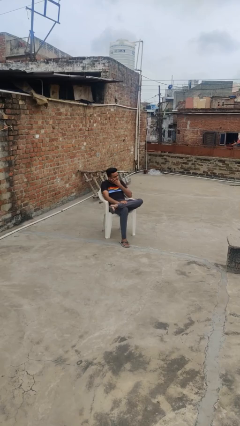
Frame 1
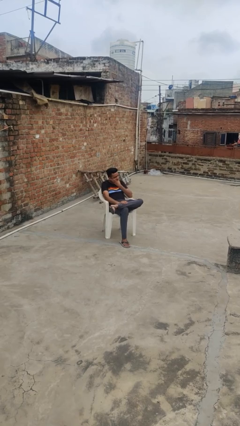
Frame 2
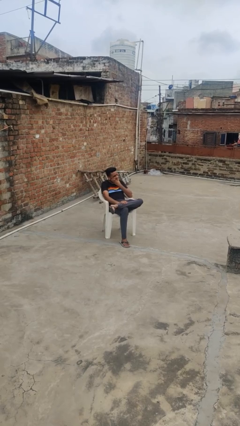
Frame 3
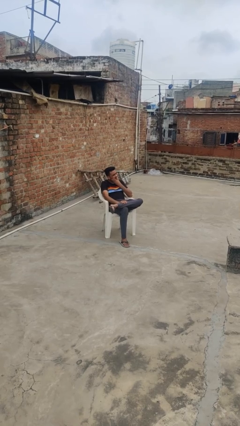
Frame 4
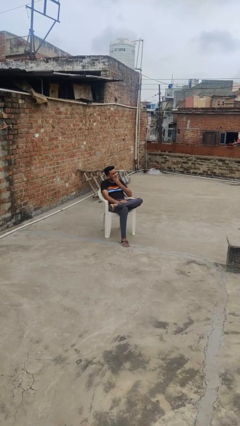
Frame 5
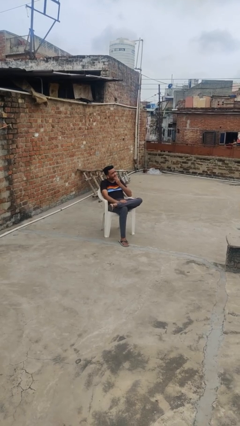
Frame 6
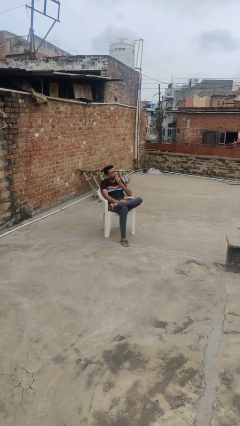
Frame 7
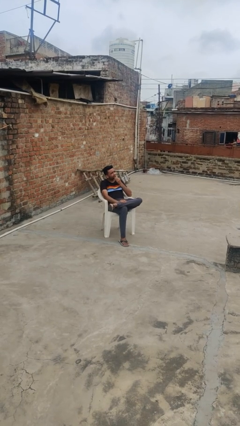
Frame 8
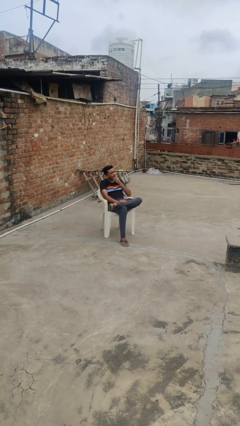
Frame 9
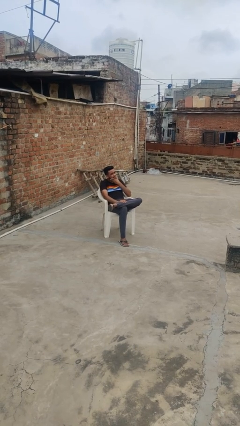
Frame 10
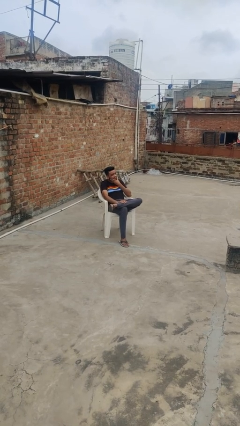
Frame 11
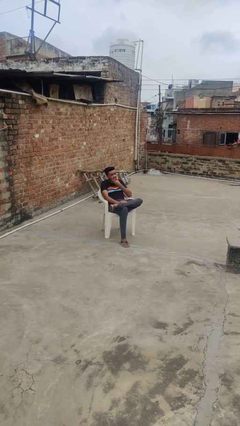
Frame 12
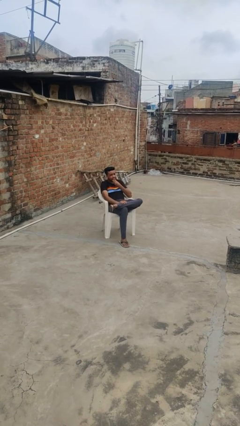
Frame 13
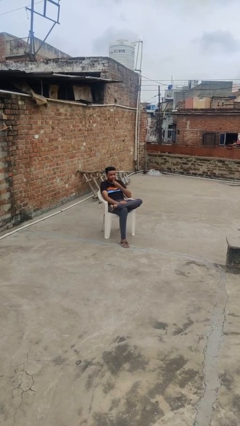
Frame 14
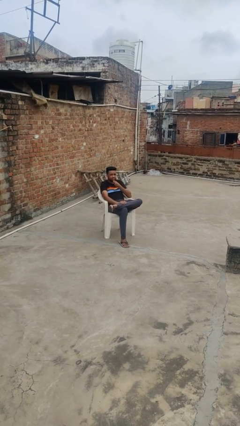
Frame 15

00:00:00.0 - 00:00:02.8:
person strokes chin

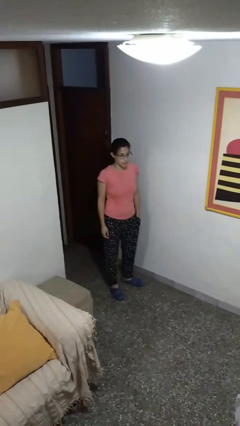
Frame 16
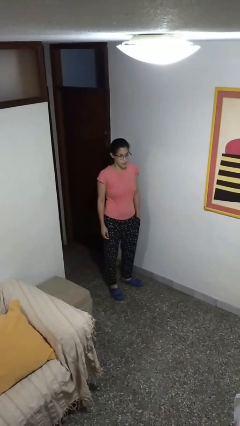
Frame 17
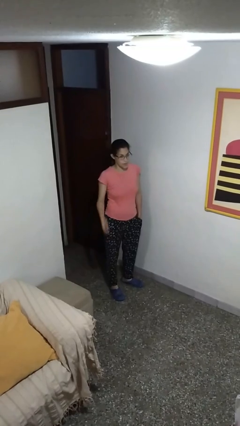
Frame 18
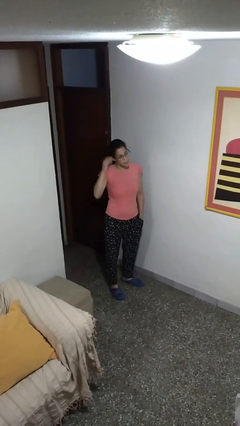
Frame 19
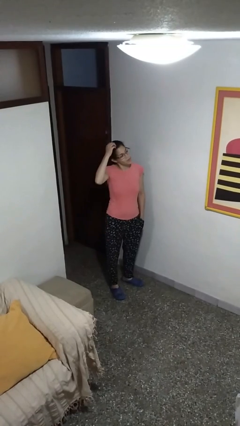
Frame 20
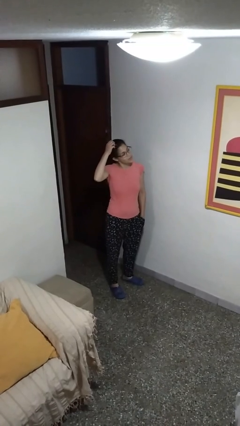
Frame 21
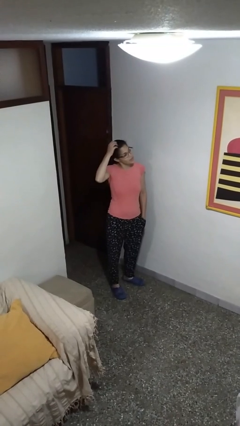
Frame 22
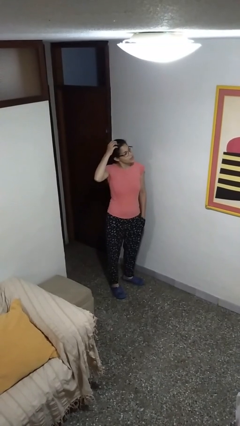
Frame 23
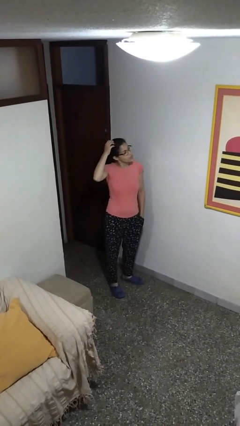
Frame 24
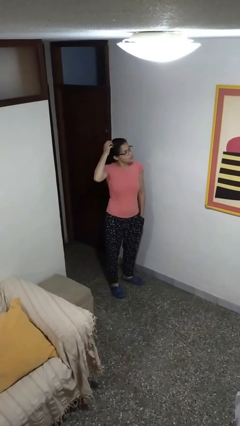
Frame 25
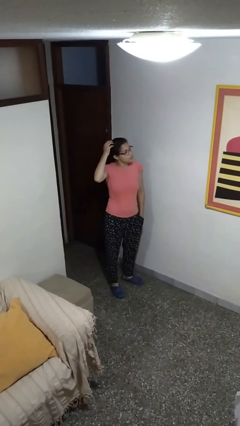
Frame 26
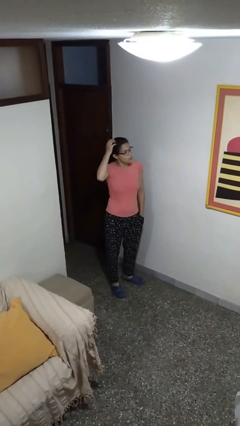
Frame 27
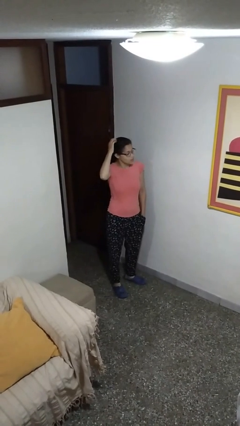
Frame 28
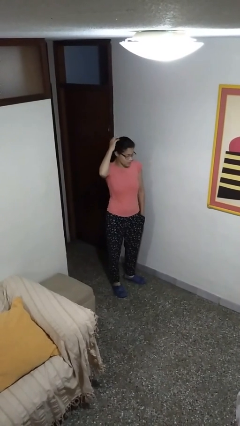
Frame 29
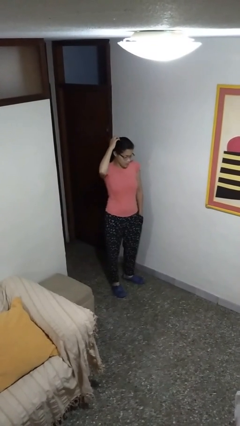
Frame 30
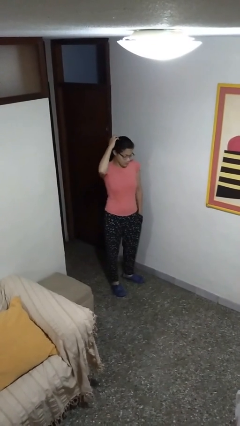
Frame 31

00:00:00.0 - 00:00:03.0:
person scratches face

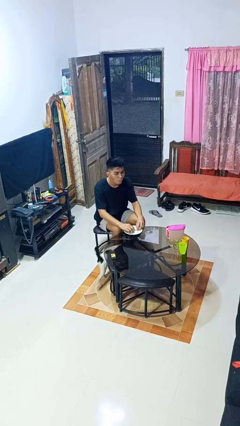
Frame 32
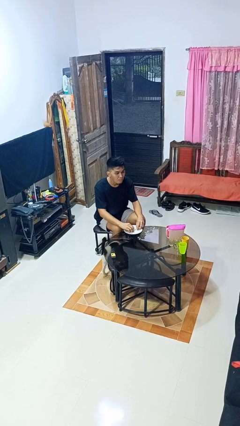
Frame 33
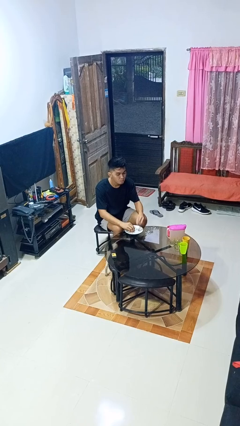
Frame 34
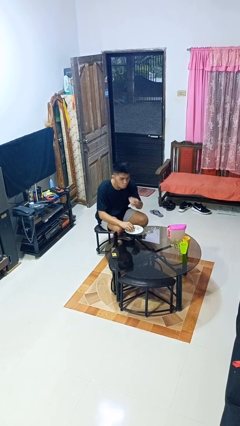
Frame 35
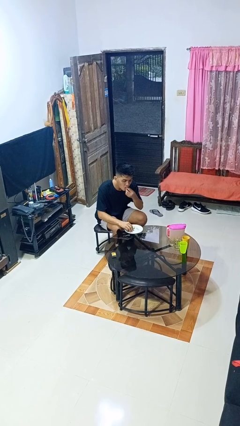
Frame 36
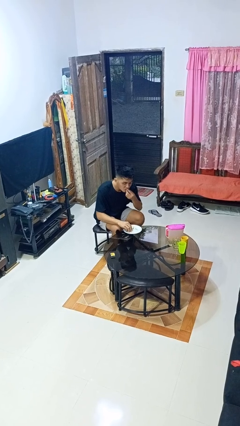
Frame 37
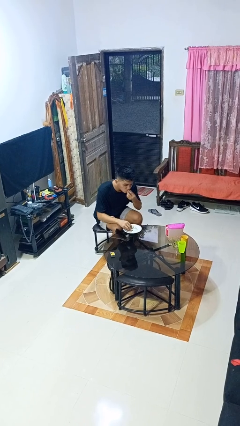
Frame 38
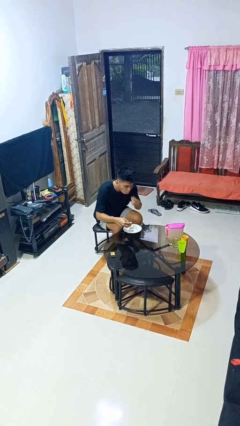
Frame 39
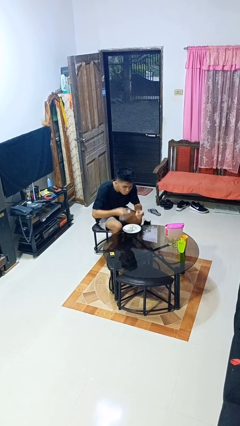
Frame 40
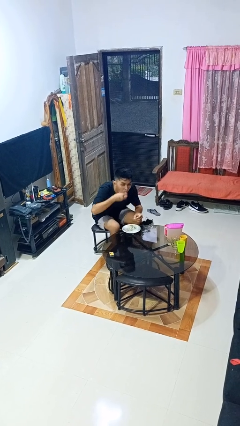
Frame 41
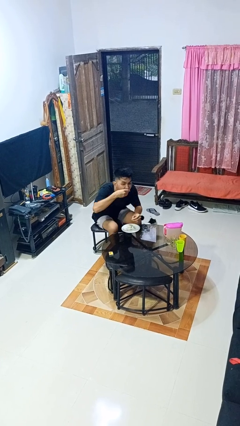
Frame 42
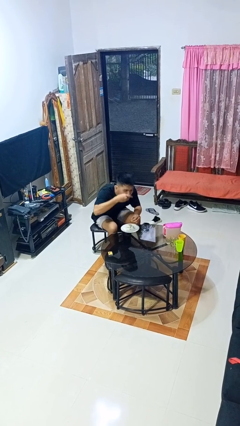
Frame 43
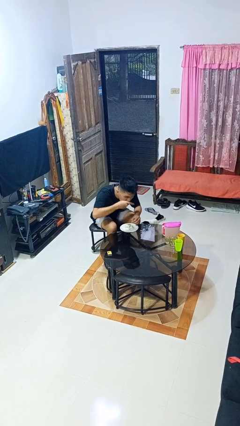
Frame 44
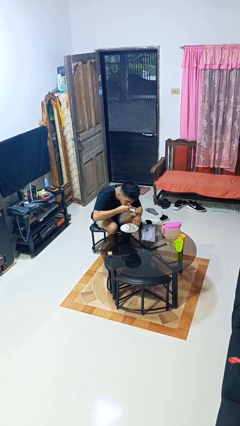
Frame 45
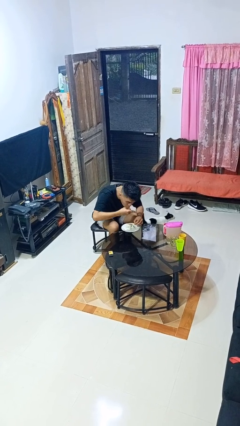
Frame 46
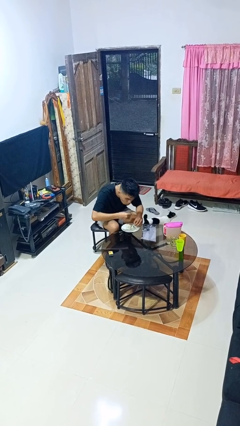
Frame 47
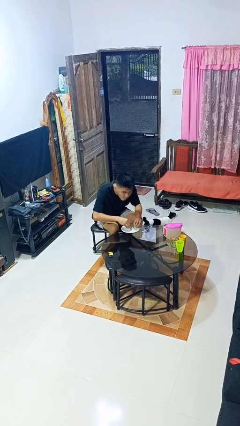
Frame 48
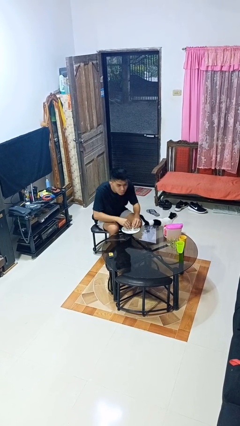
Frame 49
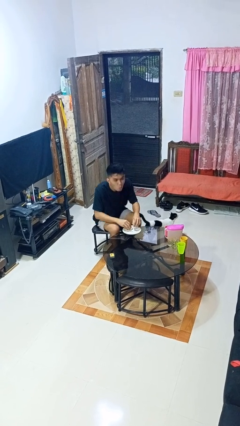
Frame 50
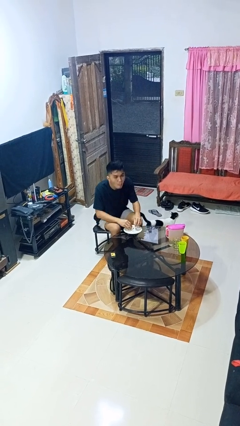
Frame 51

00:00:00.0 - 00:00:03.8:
person eats with hands

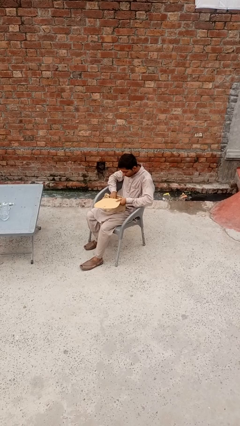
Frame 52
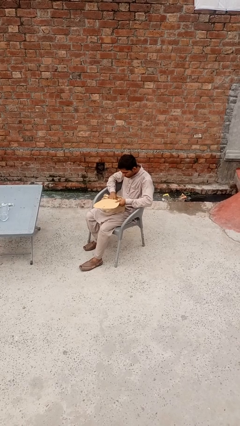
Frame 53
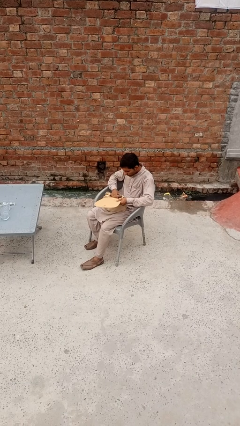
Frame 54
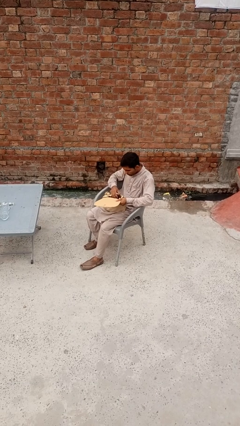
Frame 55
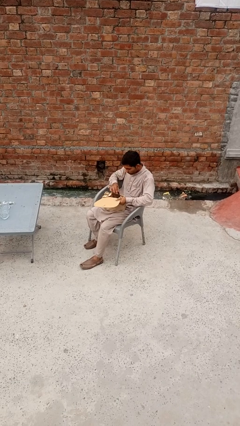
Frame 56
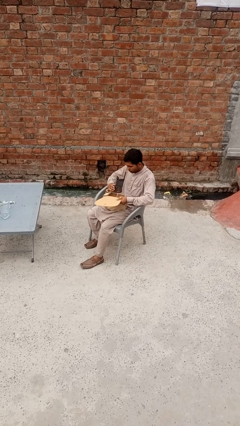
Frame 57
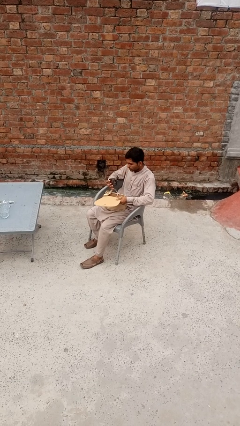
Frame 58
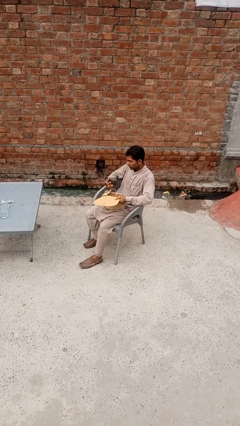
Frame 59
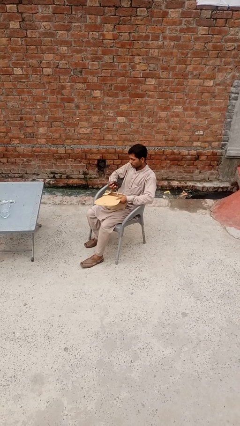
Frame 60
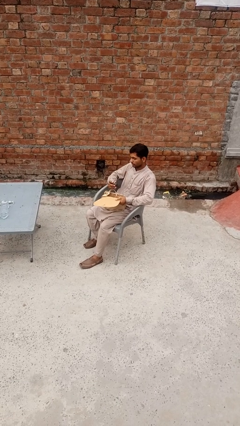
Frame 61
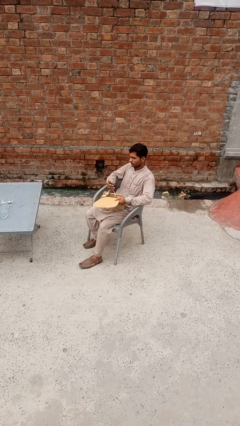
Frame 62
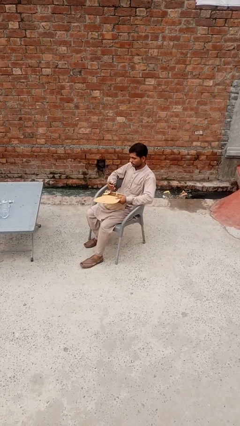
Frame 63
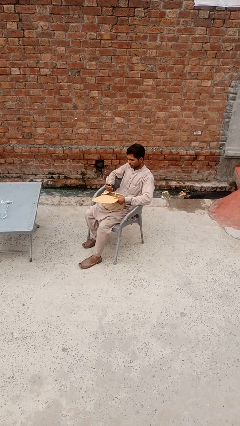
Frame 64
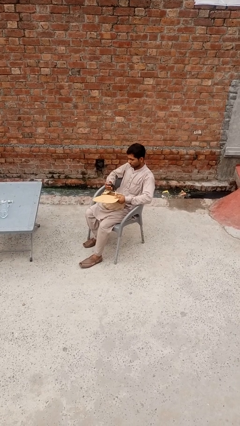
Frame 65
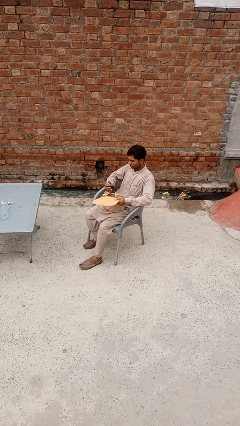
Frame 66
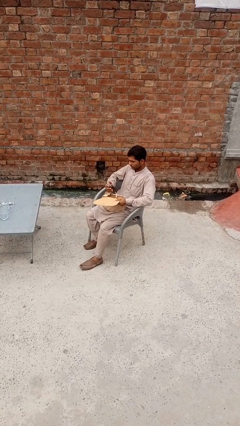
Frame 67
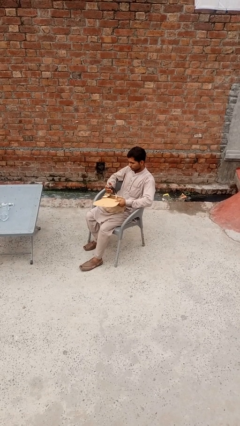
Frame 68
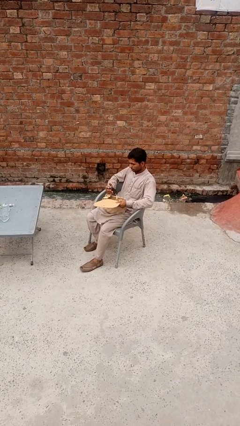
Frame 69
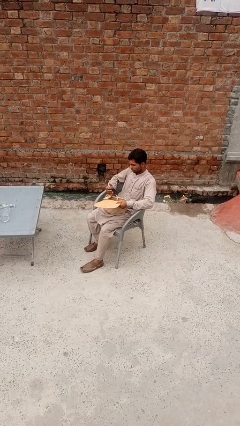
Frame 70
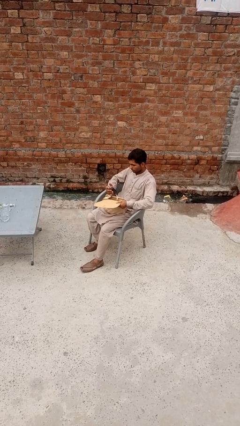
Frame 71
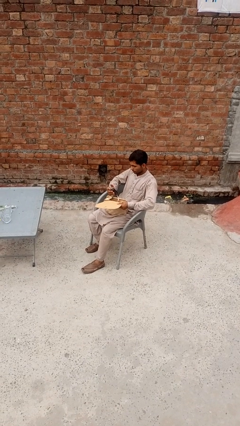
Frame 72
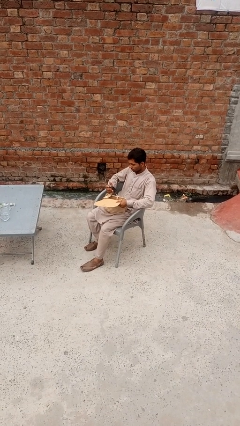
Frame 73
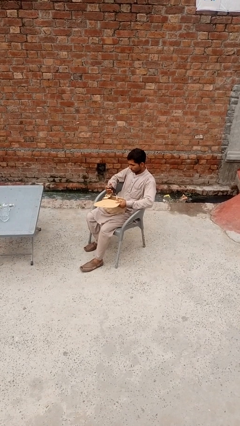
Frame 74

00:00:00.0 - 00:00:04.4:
person takes object from purse

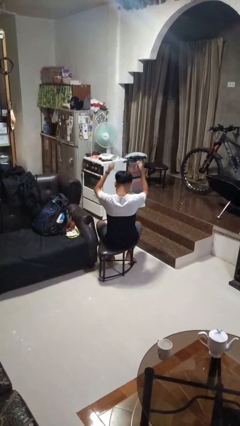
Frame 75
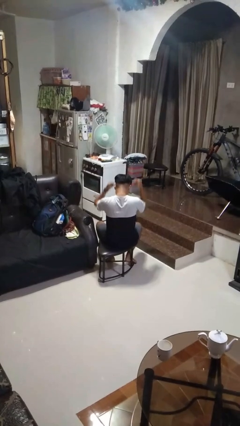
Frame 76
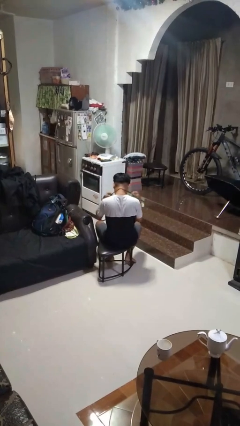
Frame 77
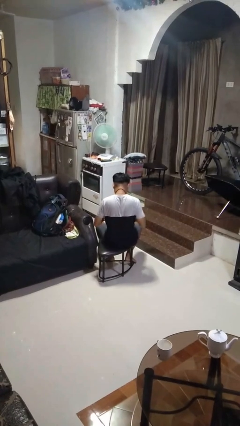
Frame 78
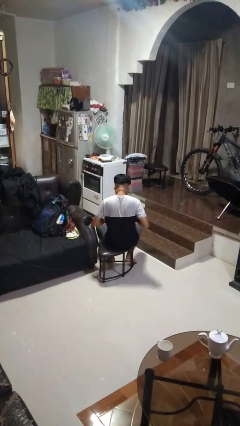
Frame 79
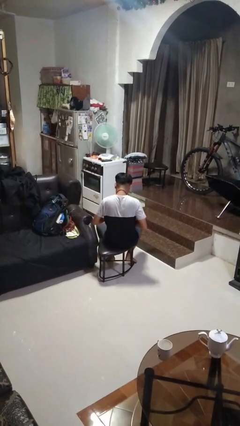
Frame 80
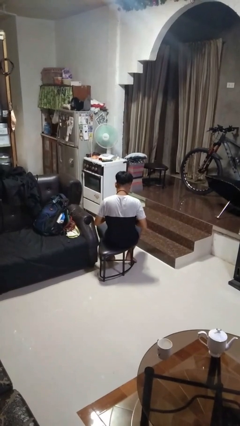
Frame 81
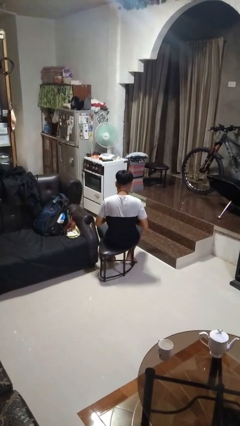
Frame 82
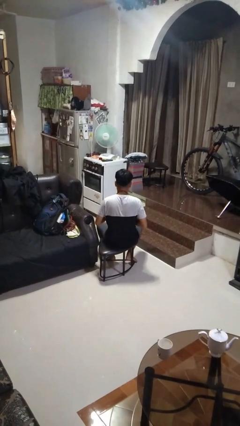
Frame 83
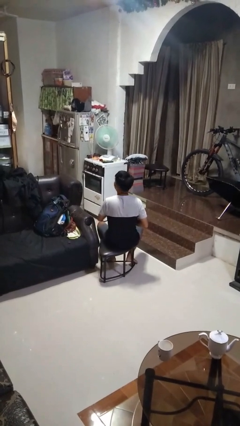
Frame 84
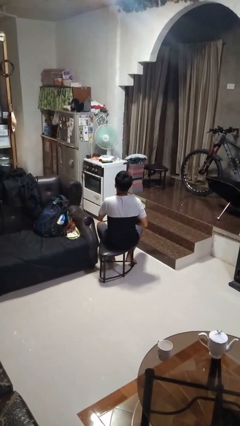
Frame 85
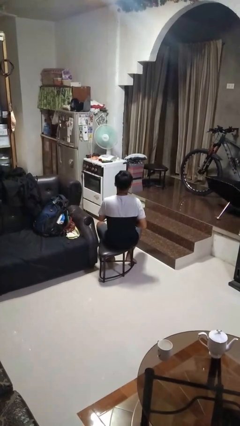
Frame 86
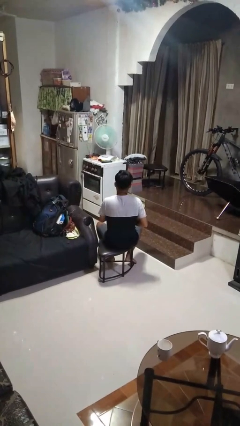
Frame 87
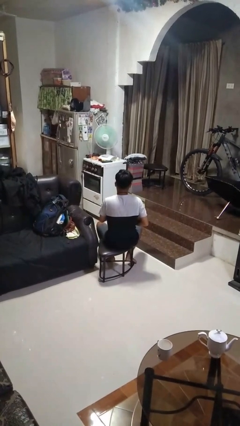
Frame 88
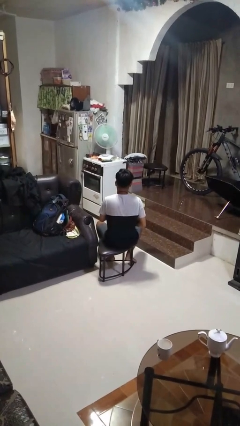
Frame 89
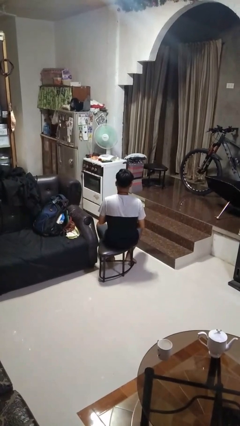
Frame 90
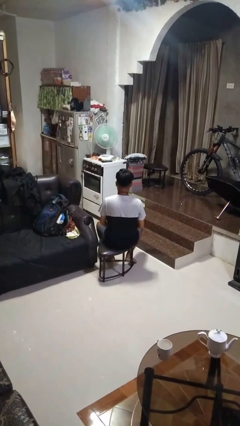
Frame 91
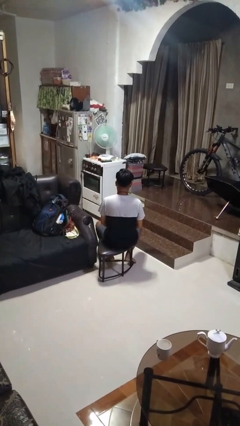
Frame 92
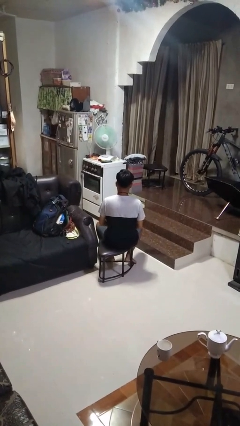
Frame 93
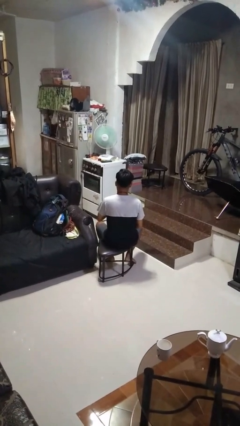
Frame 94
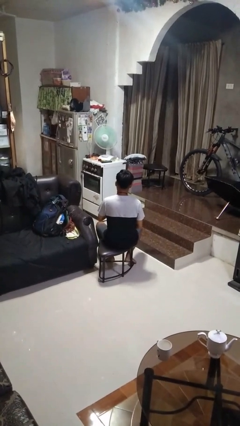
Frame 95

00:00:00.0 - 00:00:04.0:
person puts on necktie
